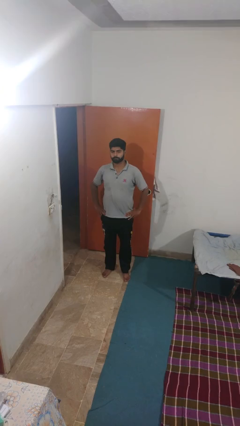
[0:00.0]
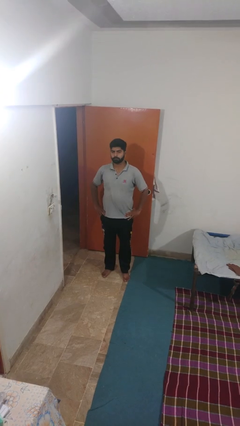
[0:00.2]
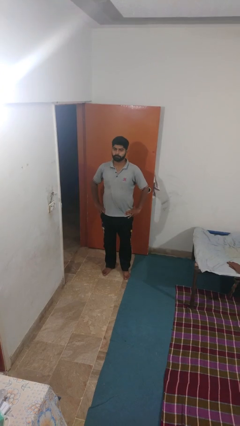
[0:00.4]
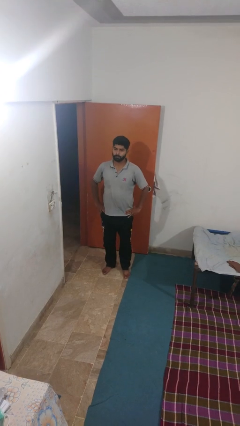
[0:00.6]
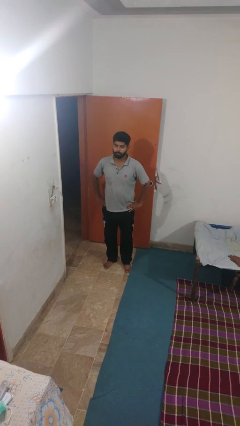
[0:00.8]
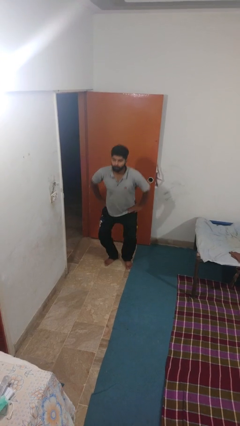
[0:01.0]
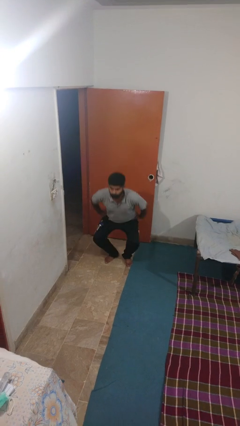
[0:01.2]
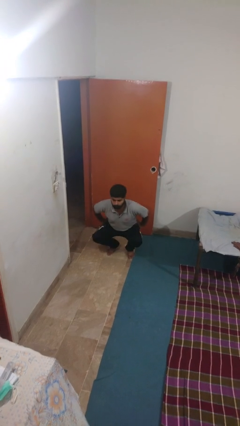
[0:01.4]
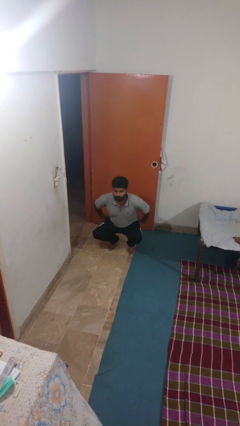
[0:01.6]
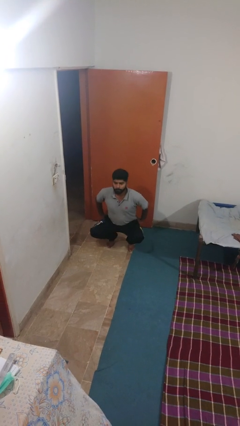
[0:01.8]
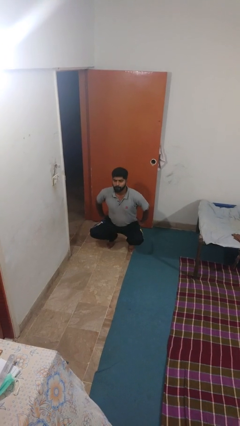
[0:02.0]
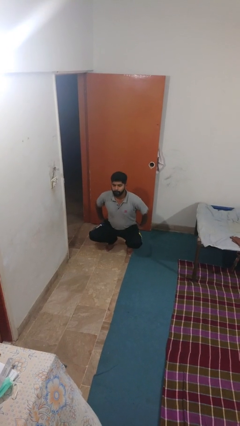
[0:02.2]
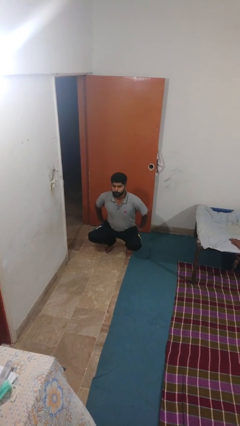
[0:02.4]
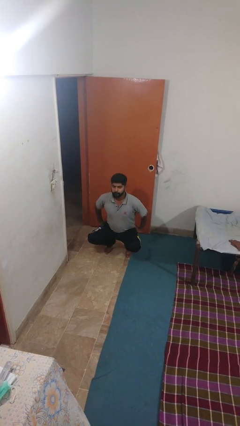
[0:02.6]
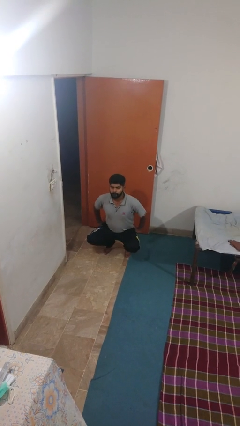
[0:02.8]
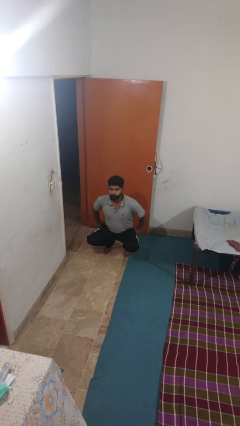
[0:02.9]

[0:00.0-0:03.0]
person squats

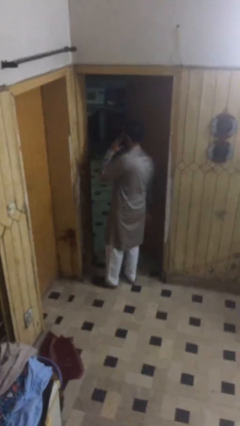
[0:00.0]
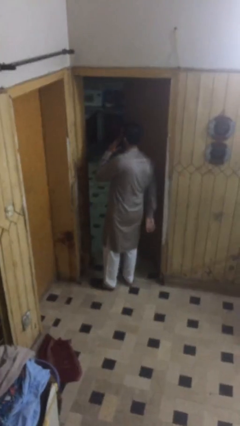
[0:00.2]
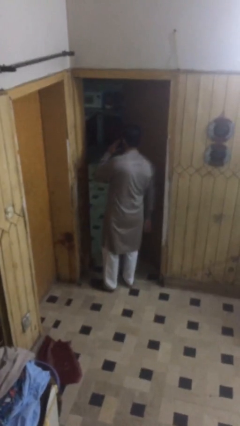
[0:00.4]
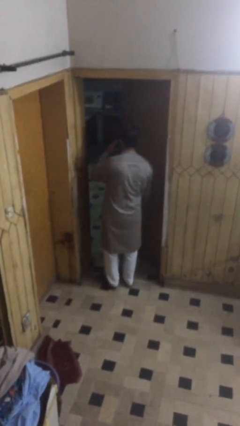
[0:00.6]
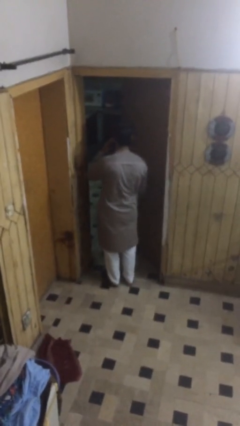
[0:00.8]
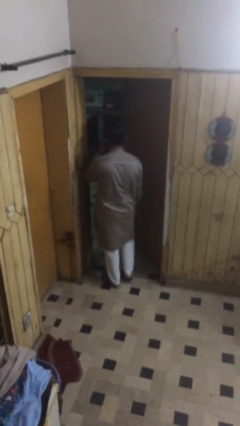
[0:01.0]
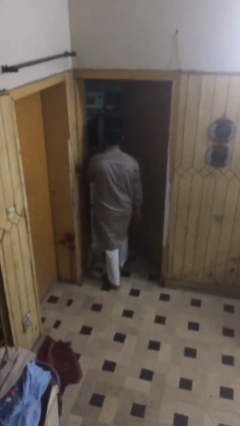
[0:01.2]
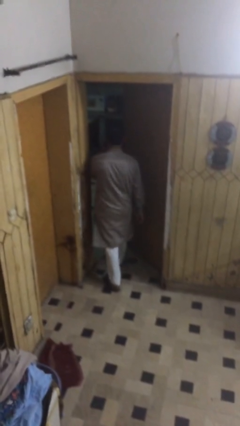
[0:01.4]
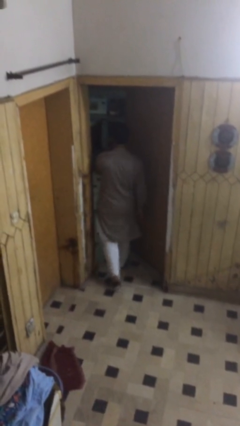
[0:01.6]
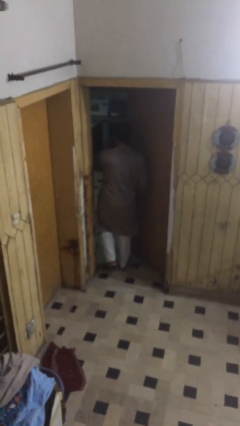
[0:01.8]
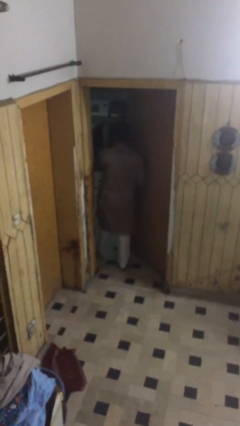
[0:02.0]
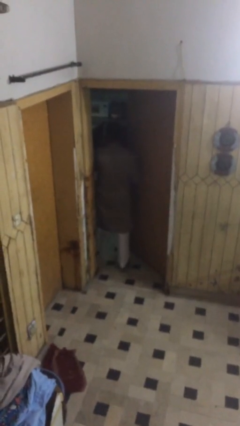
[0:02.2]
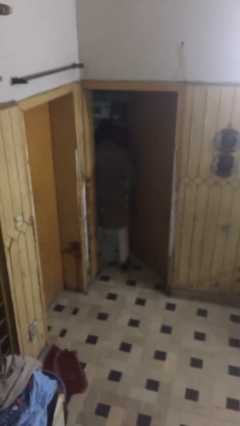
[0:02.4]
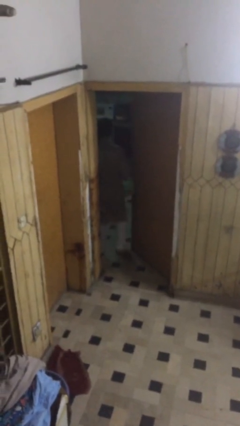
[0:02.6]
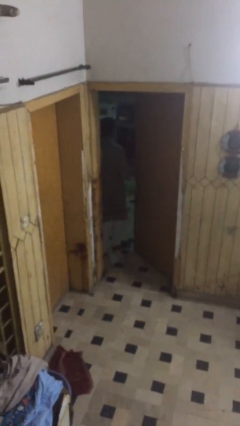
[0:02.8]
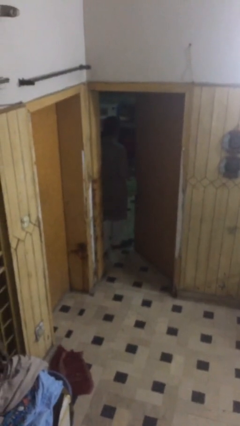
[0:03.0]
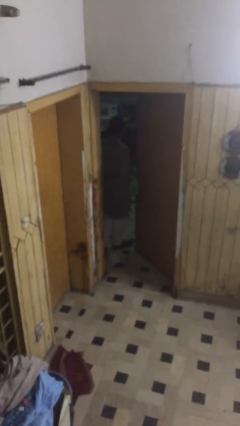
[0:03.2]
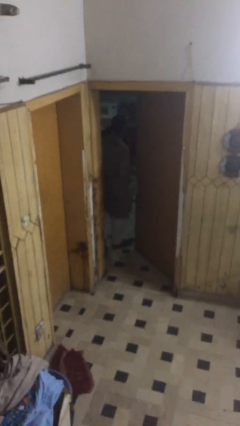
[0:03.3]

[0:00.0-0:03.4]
person exits scene through structure

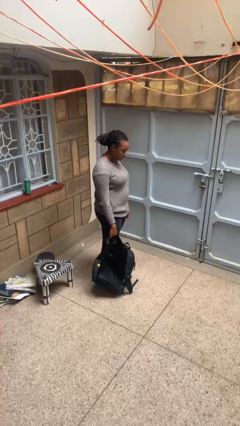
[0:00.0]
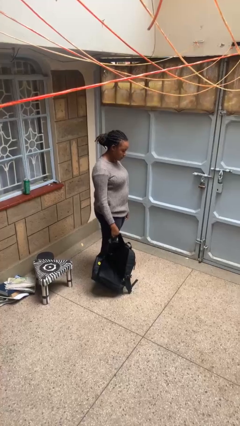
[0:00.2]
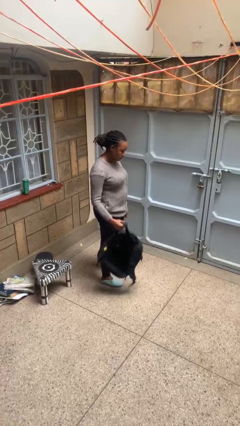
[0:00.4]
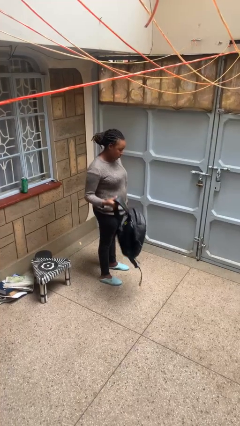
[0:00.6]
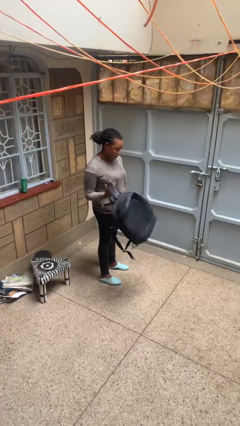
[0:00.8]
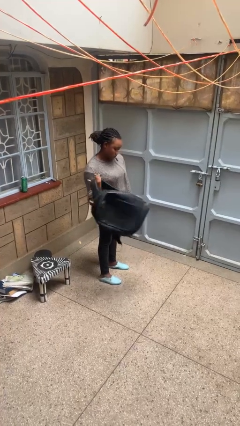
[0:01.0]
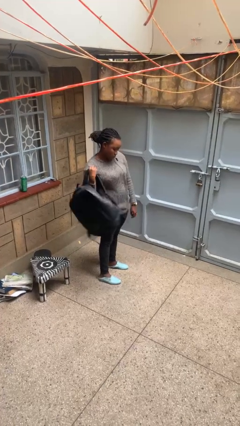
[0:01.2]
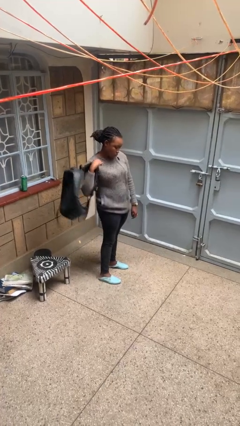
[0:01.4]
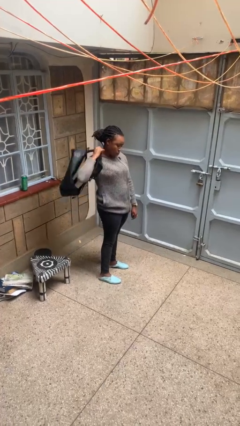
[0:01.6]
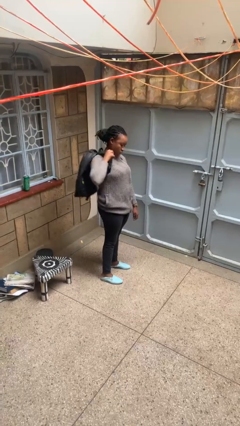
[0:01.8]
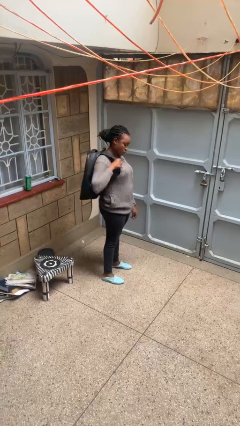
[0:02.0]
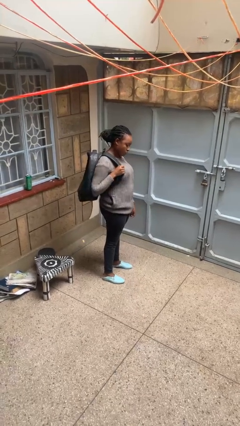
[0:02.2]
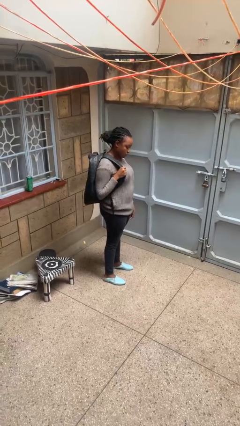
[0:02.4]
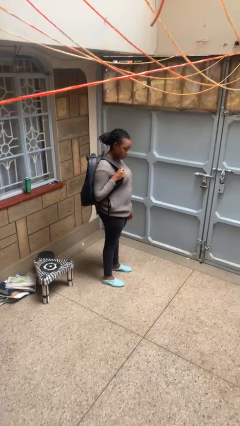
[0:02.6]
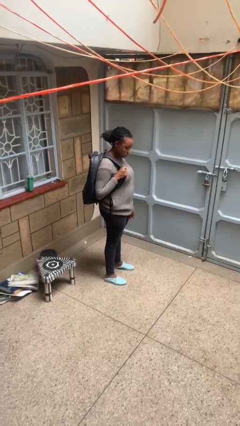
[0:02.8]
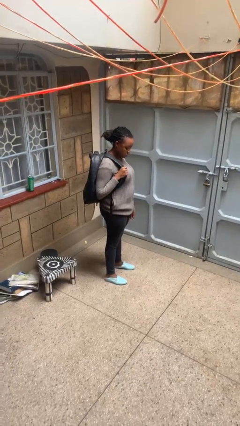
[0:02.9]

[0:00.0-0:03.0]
person puts on backpack

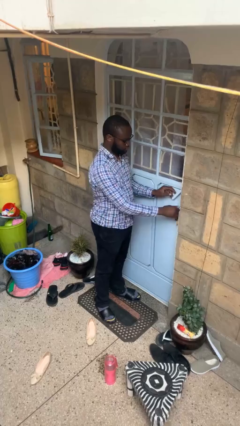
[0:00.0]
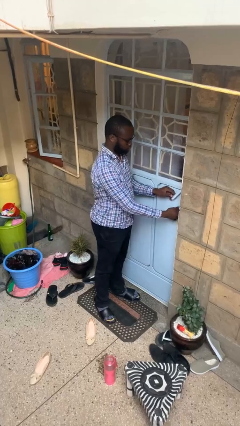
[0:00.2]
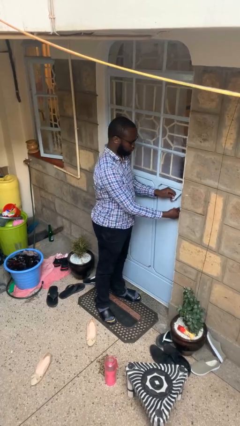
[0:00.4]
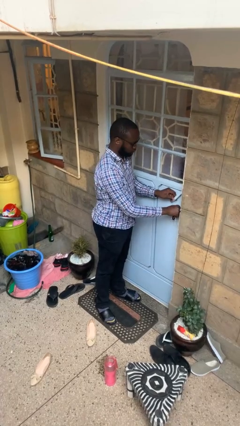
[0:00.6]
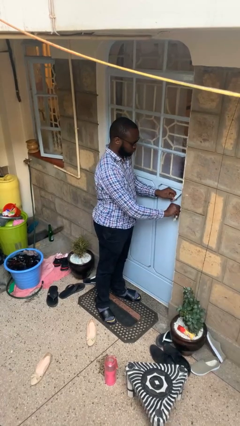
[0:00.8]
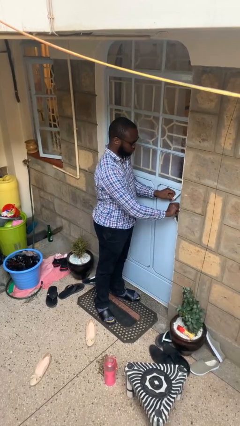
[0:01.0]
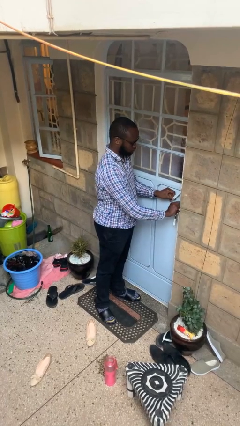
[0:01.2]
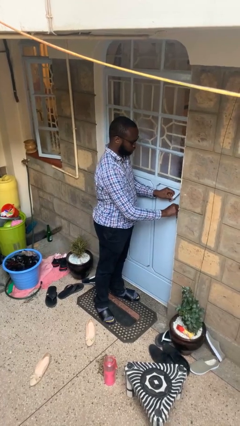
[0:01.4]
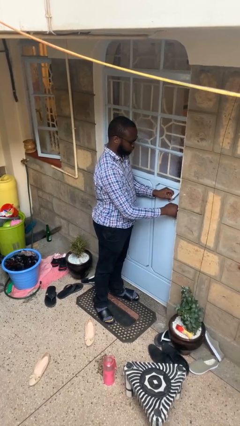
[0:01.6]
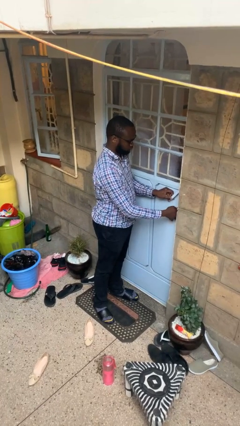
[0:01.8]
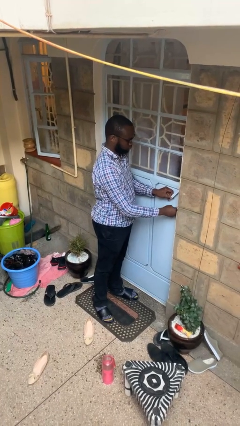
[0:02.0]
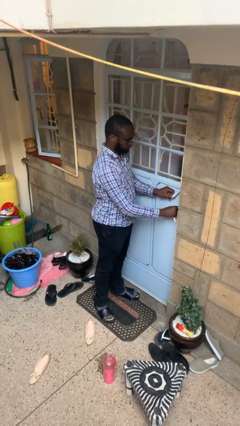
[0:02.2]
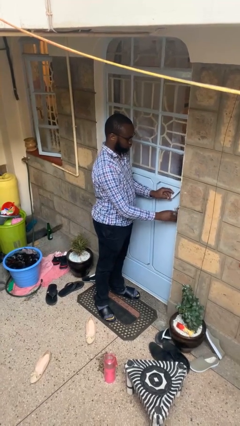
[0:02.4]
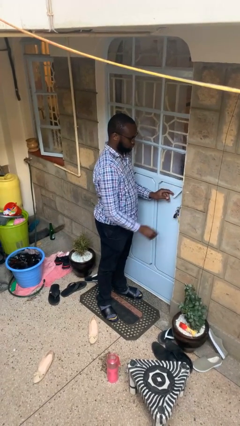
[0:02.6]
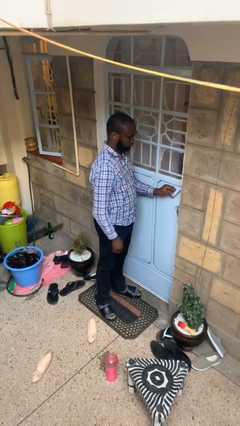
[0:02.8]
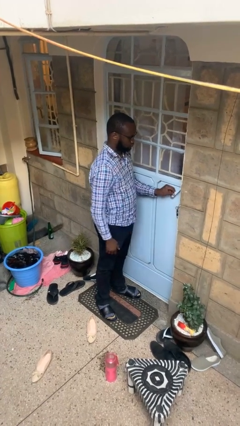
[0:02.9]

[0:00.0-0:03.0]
person unlocks door with keys

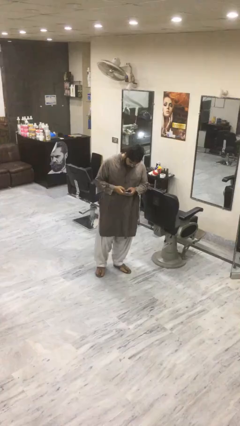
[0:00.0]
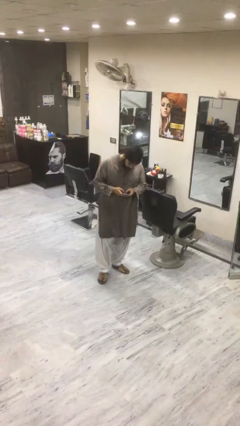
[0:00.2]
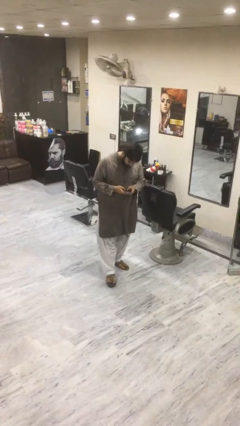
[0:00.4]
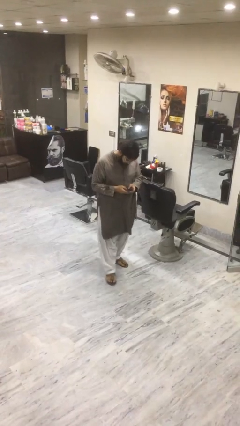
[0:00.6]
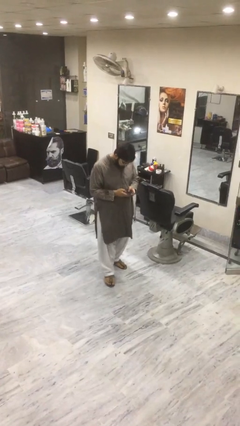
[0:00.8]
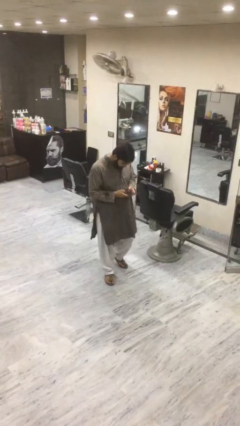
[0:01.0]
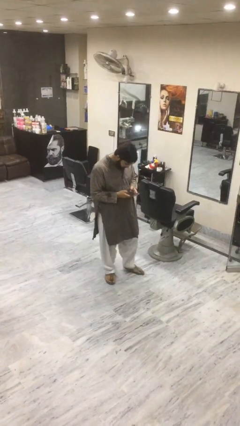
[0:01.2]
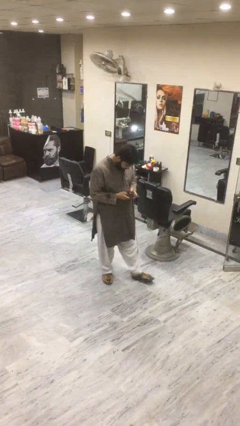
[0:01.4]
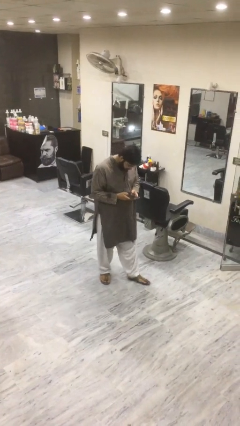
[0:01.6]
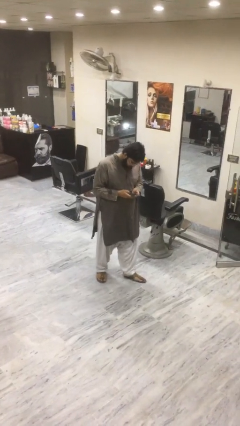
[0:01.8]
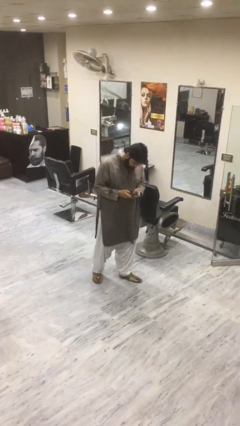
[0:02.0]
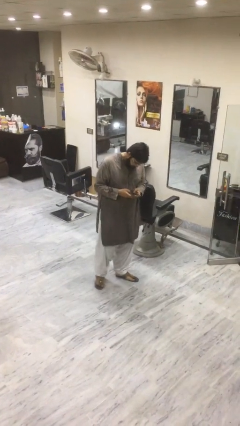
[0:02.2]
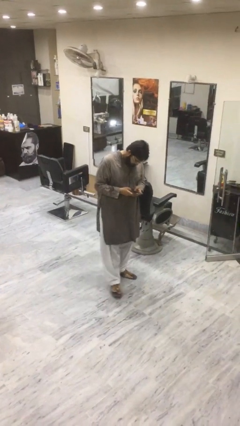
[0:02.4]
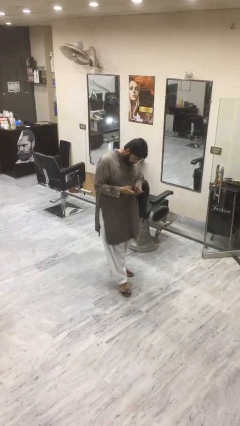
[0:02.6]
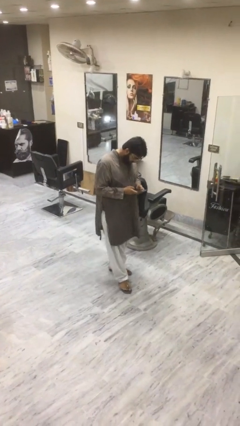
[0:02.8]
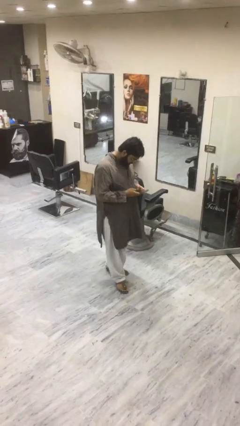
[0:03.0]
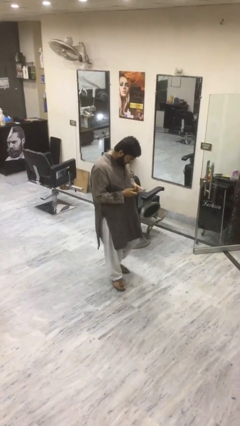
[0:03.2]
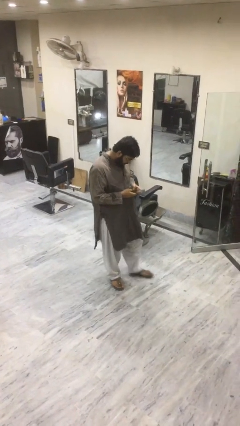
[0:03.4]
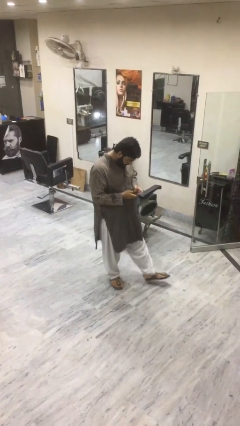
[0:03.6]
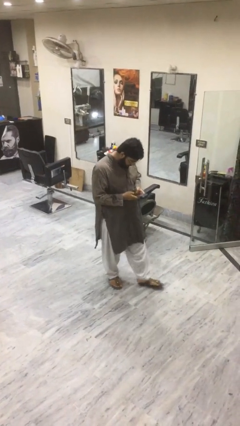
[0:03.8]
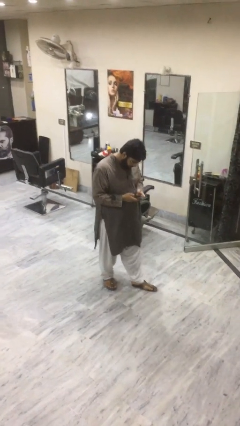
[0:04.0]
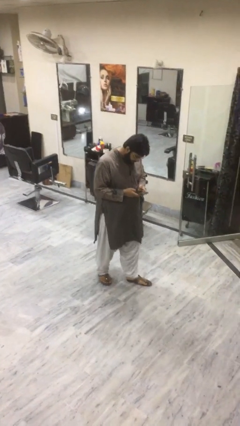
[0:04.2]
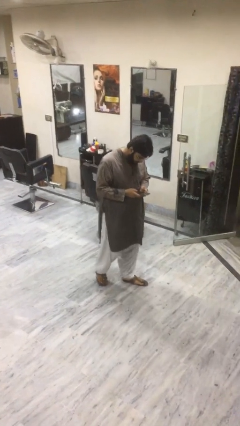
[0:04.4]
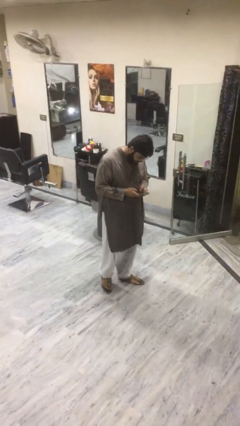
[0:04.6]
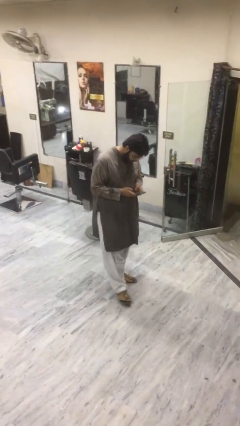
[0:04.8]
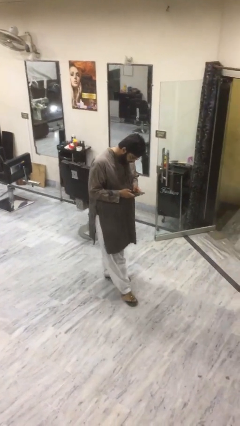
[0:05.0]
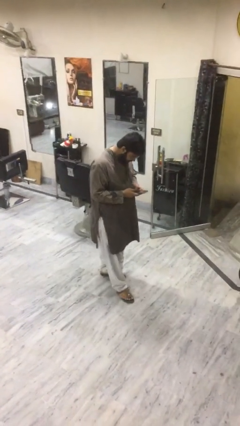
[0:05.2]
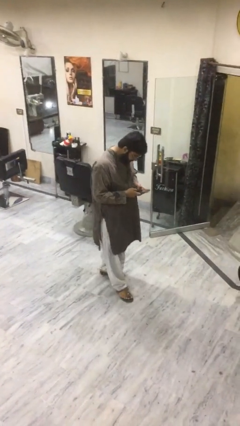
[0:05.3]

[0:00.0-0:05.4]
person texts on phone
